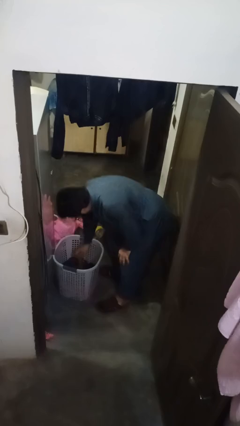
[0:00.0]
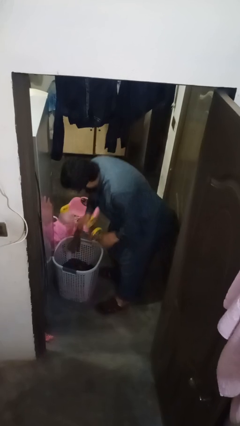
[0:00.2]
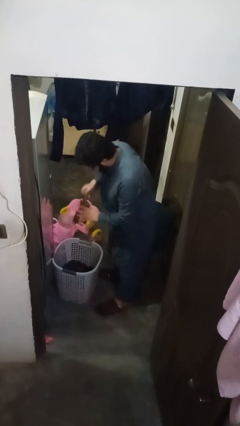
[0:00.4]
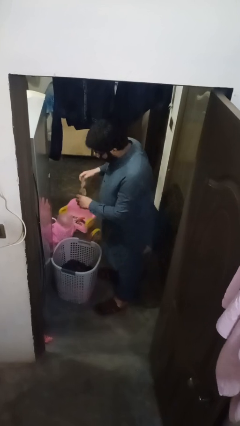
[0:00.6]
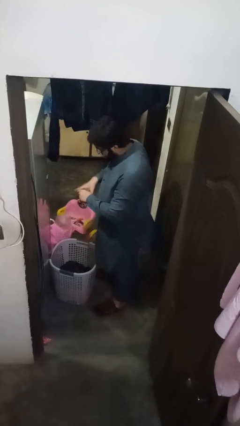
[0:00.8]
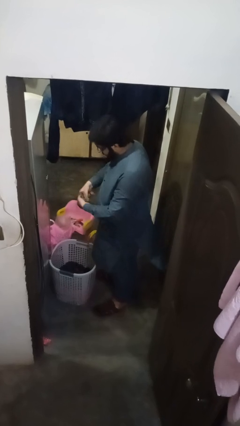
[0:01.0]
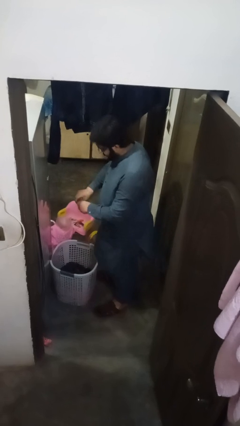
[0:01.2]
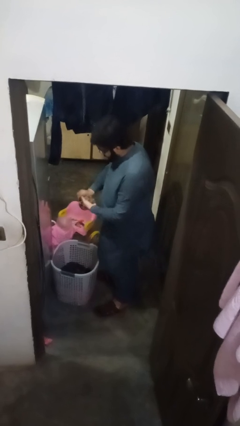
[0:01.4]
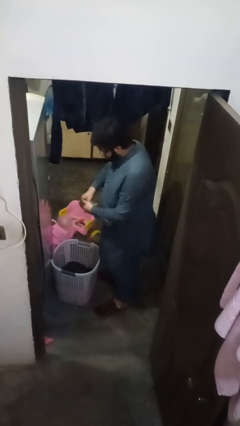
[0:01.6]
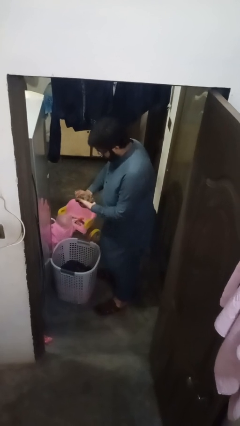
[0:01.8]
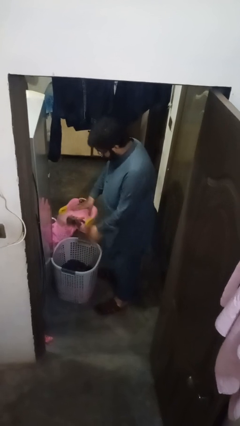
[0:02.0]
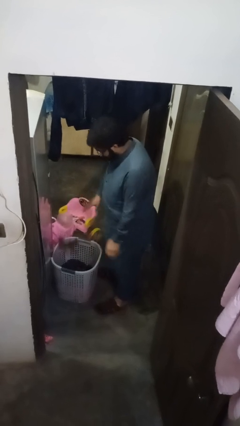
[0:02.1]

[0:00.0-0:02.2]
person folds socks

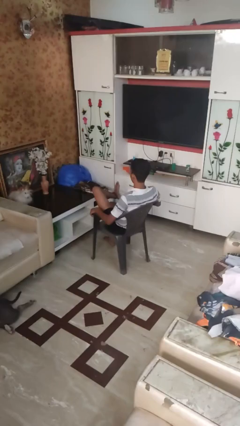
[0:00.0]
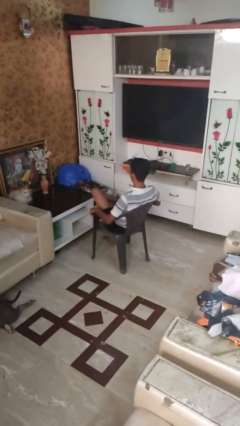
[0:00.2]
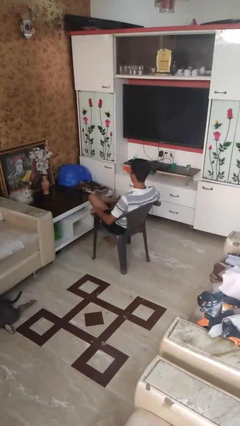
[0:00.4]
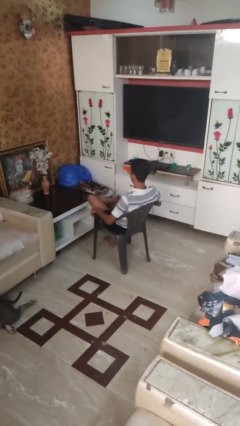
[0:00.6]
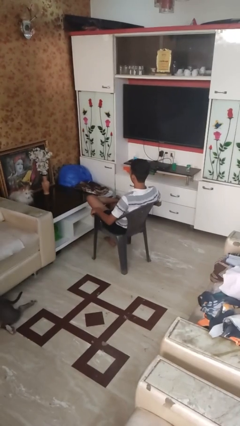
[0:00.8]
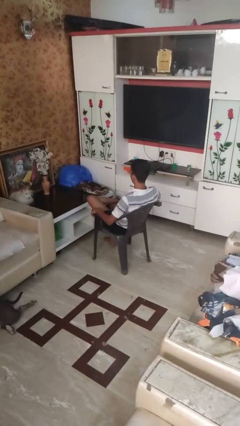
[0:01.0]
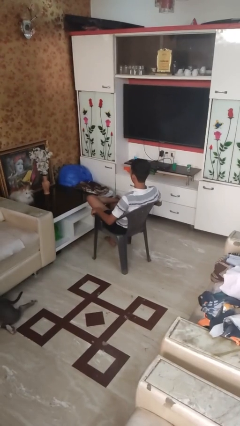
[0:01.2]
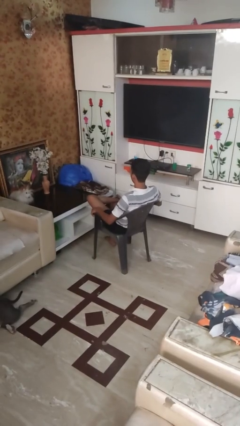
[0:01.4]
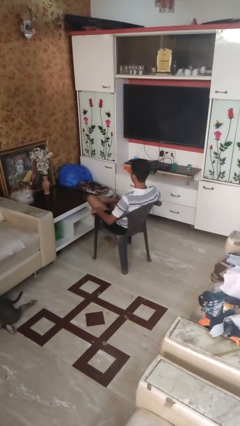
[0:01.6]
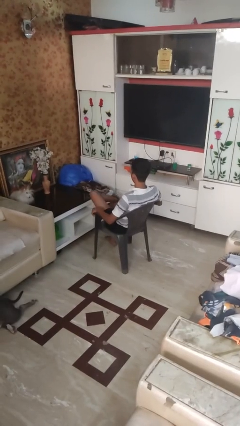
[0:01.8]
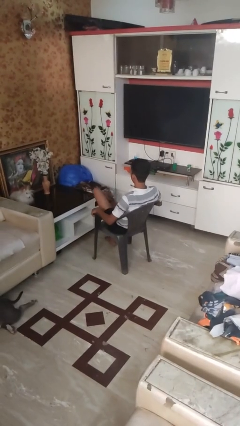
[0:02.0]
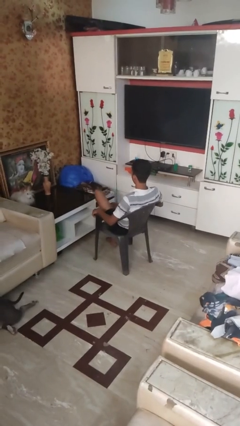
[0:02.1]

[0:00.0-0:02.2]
person crosses legs

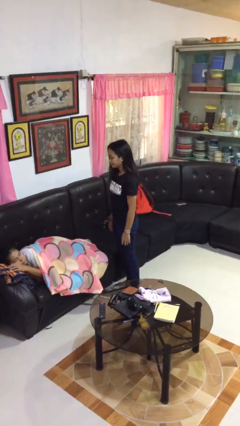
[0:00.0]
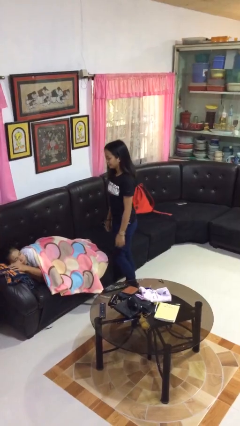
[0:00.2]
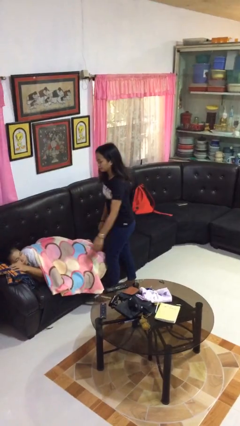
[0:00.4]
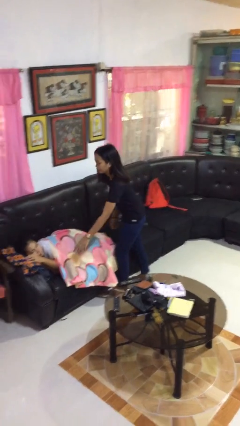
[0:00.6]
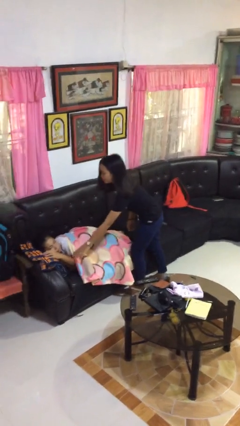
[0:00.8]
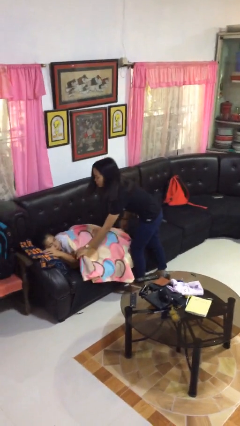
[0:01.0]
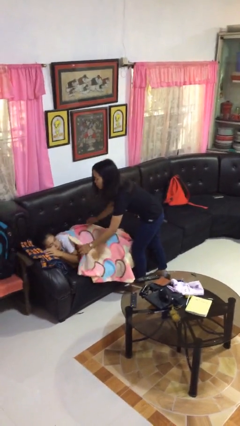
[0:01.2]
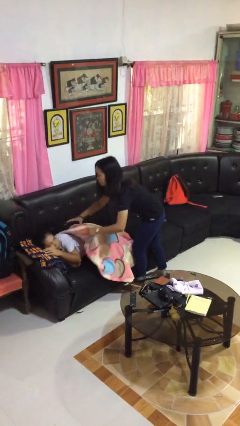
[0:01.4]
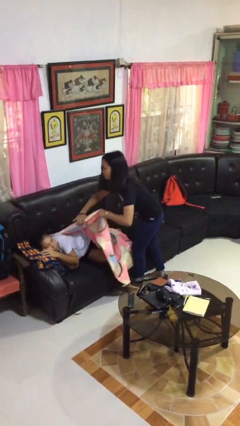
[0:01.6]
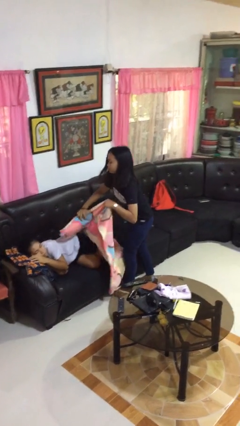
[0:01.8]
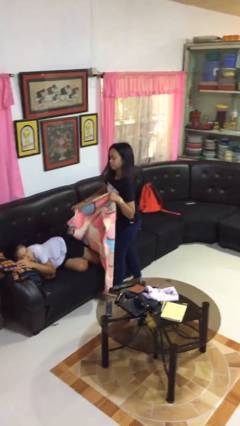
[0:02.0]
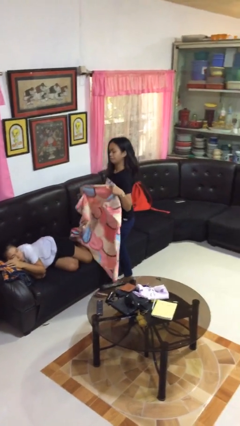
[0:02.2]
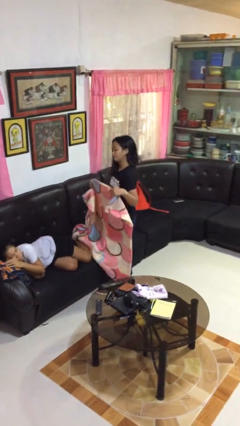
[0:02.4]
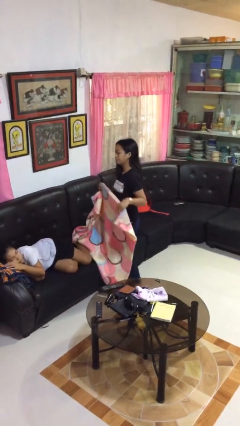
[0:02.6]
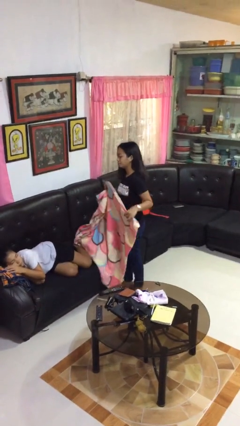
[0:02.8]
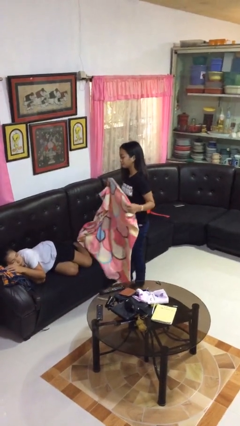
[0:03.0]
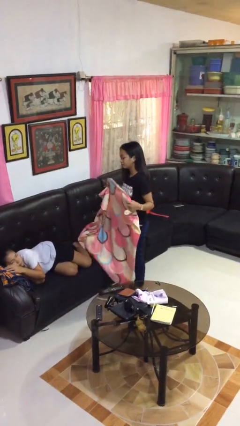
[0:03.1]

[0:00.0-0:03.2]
person uncovers friend with blanket

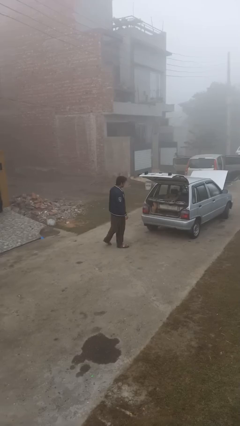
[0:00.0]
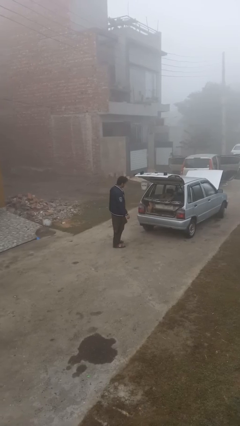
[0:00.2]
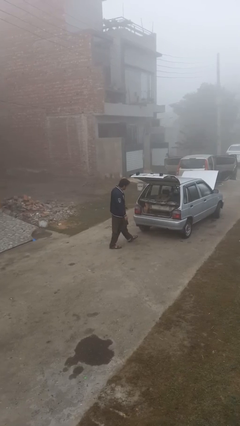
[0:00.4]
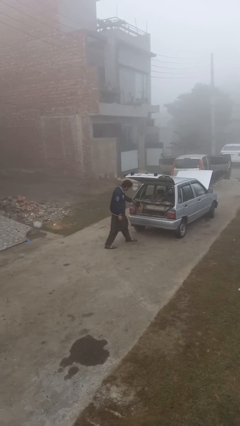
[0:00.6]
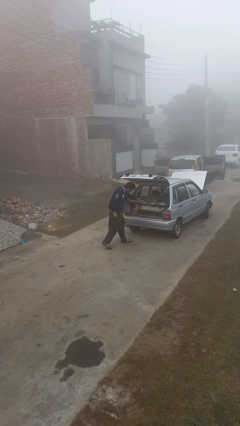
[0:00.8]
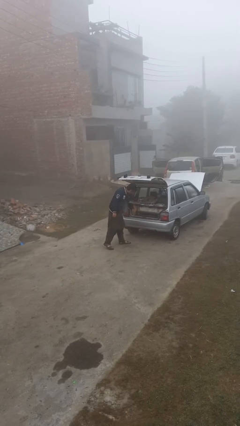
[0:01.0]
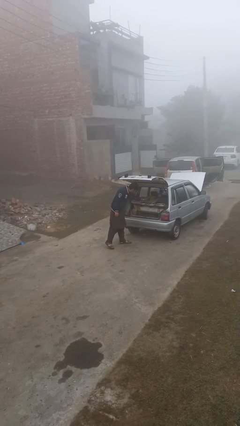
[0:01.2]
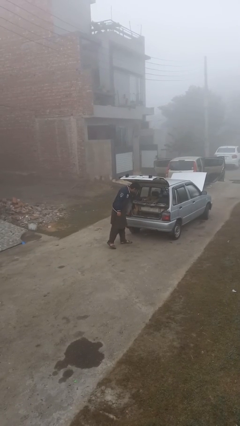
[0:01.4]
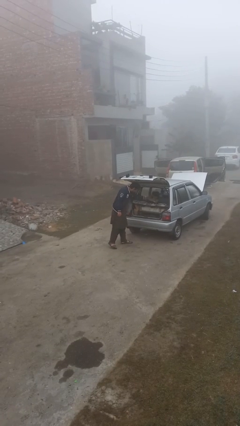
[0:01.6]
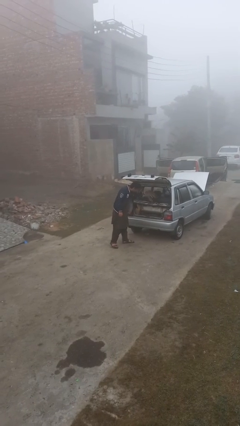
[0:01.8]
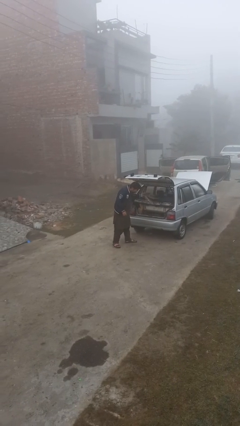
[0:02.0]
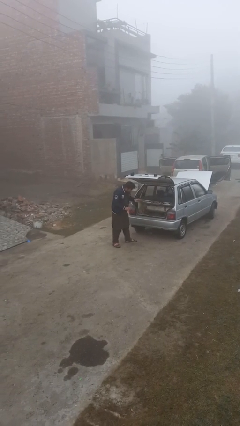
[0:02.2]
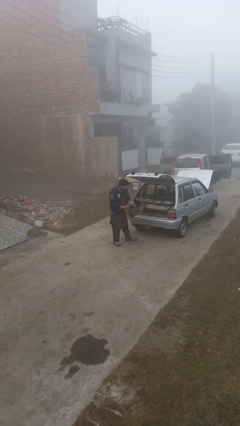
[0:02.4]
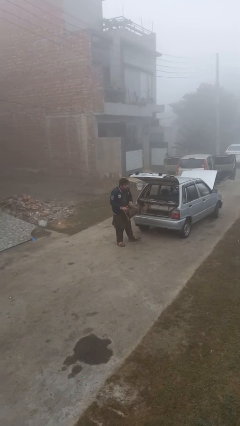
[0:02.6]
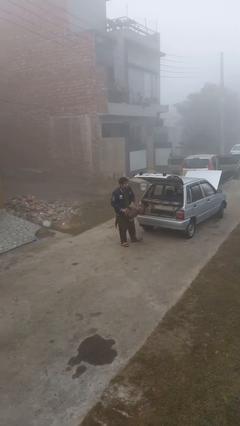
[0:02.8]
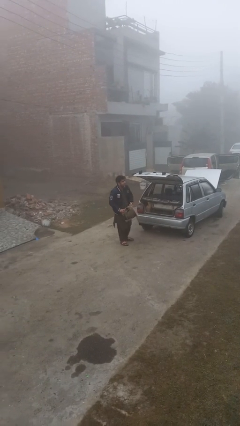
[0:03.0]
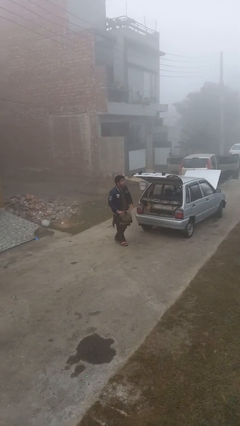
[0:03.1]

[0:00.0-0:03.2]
person unloads car

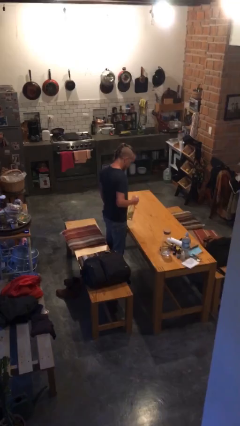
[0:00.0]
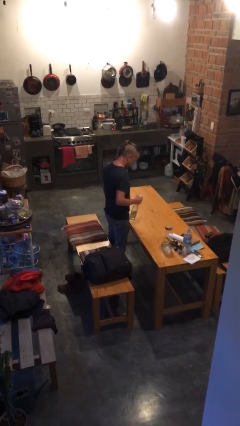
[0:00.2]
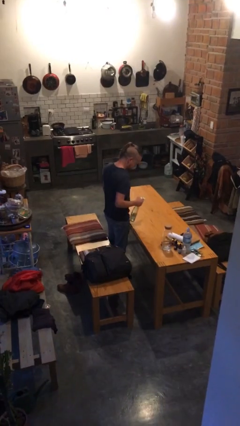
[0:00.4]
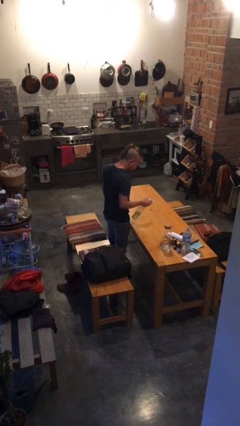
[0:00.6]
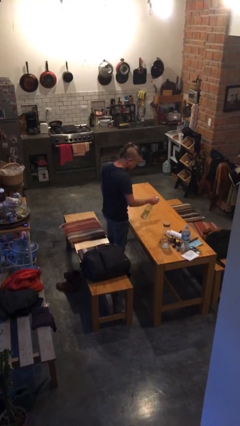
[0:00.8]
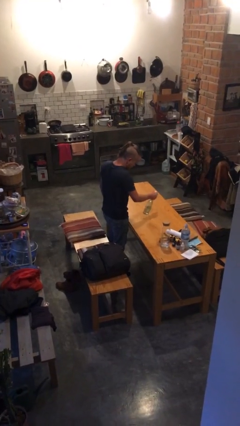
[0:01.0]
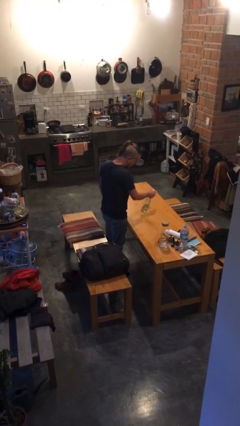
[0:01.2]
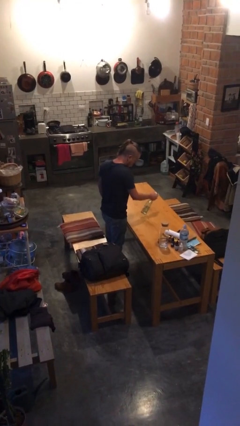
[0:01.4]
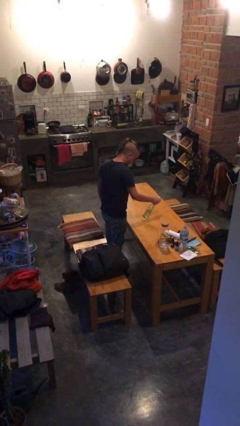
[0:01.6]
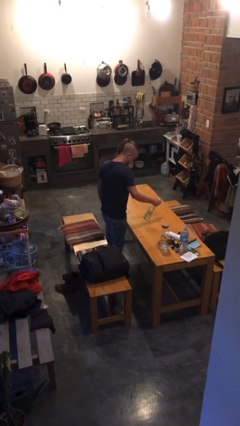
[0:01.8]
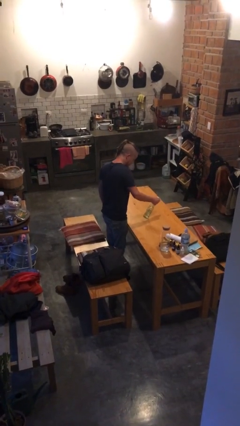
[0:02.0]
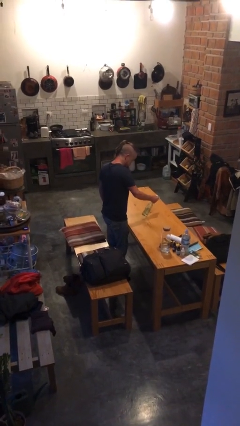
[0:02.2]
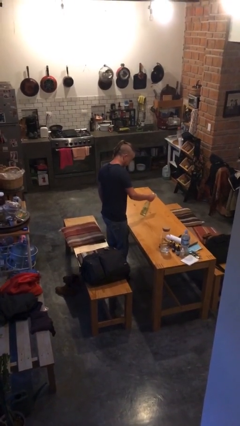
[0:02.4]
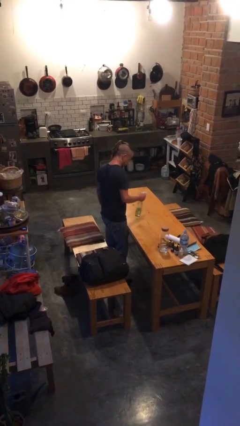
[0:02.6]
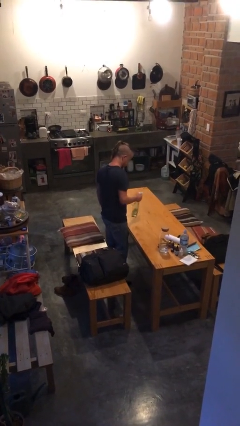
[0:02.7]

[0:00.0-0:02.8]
person sprays from bottle

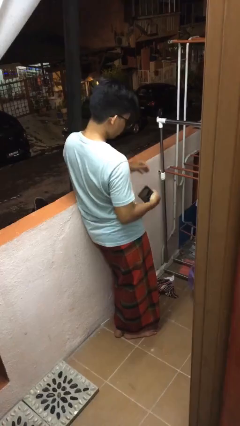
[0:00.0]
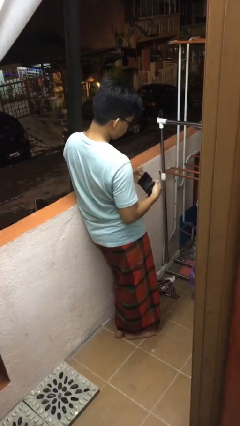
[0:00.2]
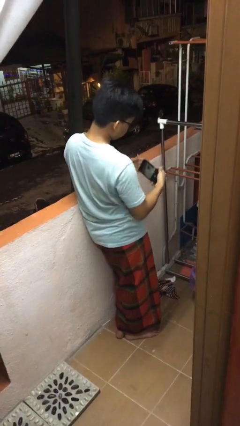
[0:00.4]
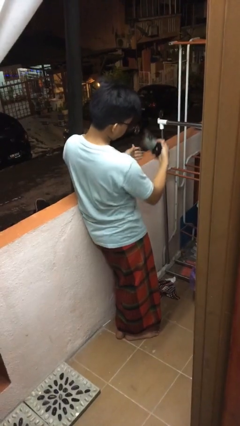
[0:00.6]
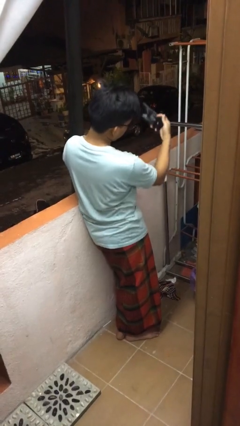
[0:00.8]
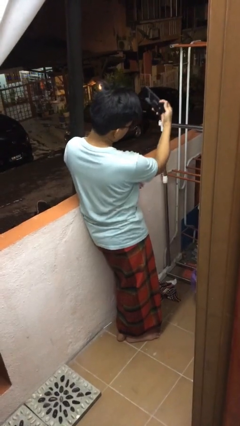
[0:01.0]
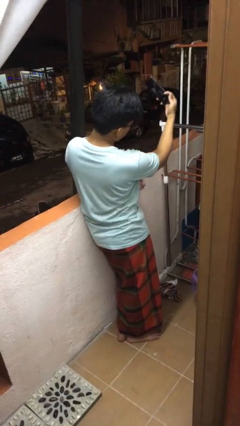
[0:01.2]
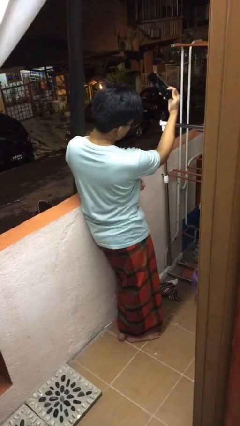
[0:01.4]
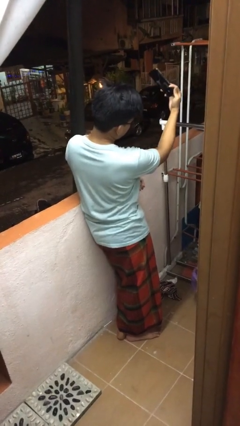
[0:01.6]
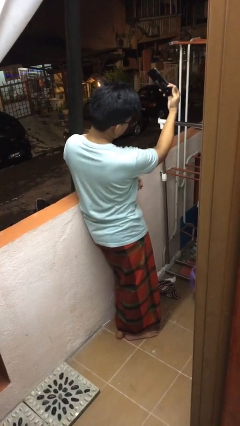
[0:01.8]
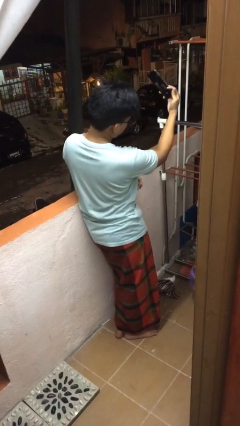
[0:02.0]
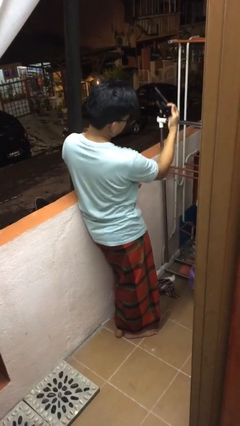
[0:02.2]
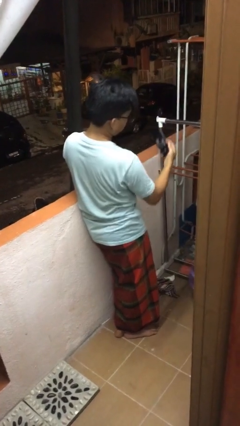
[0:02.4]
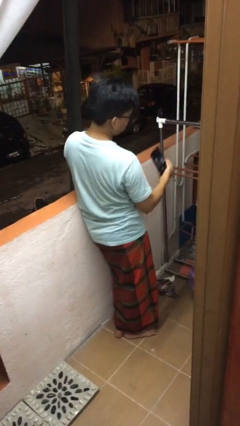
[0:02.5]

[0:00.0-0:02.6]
person takes selfie

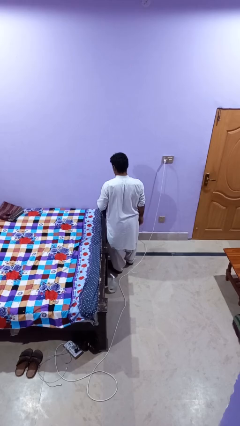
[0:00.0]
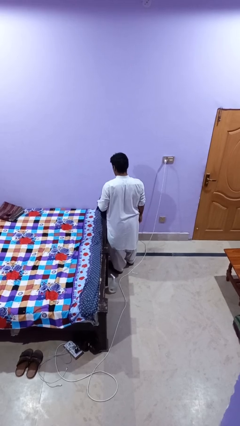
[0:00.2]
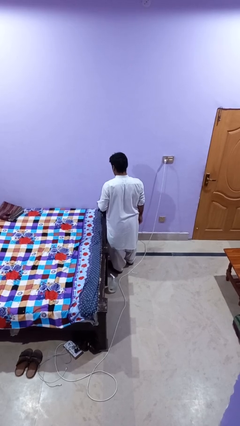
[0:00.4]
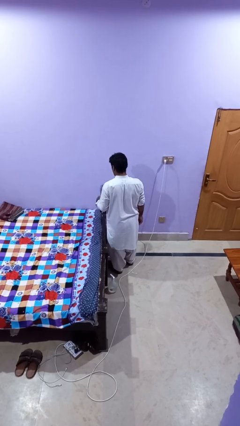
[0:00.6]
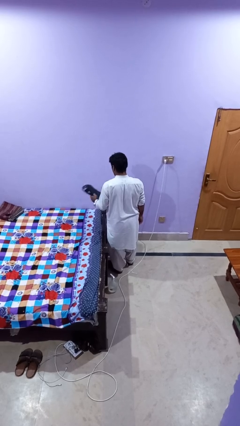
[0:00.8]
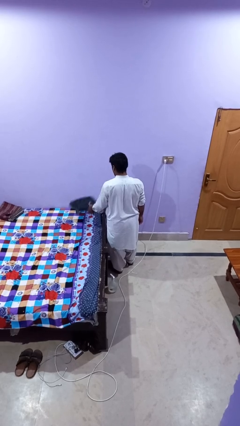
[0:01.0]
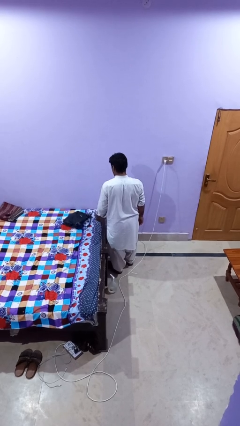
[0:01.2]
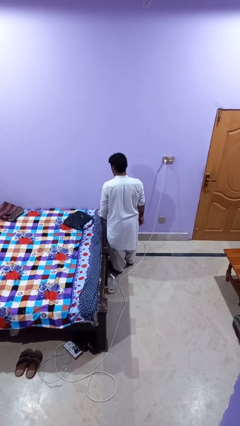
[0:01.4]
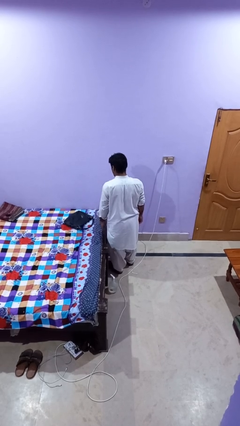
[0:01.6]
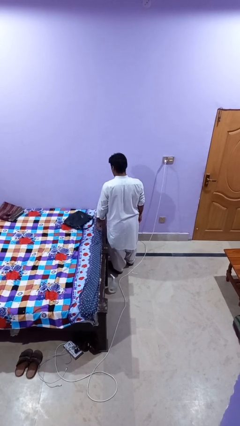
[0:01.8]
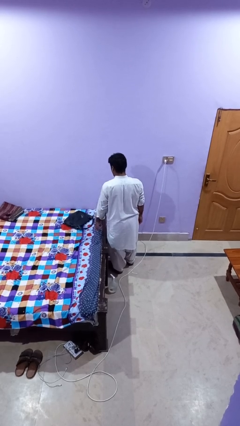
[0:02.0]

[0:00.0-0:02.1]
person throws object on bed
